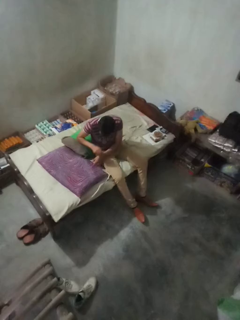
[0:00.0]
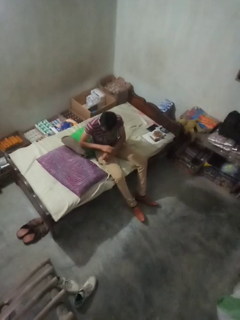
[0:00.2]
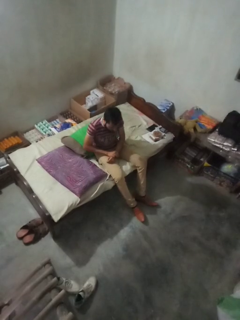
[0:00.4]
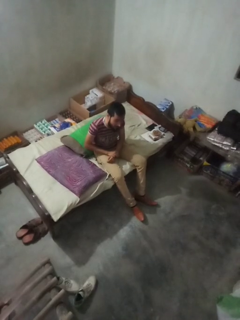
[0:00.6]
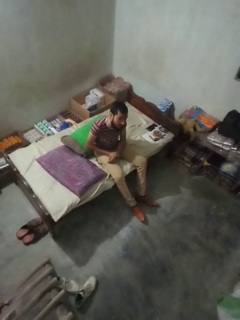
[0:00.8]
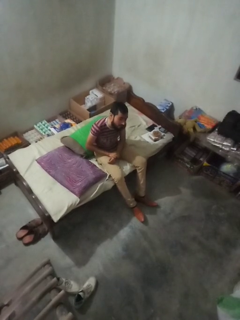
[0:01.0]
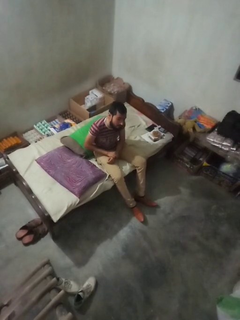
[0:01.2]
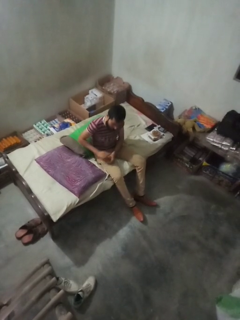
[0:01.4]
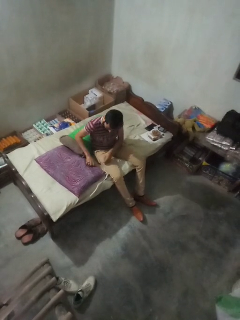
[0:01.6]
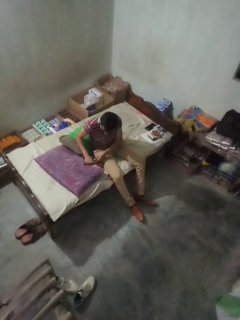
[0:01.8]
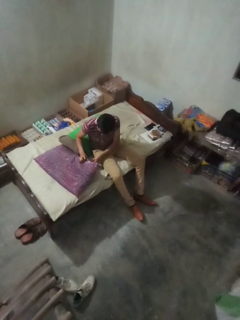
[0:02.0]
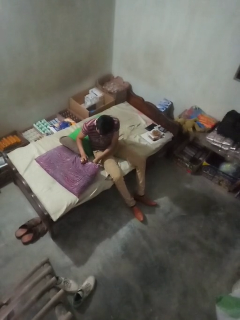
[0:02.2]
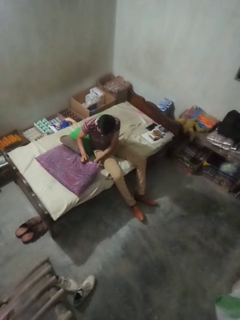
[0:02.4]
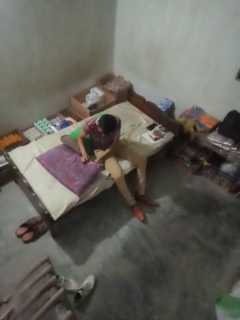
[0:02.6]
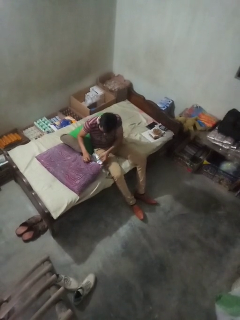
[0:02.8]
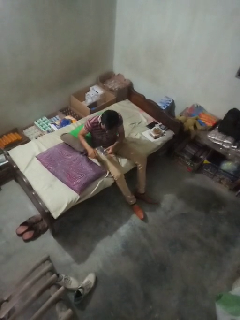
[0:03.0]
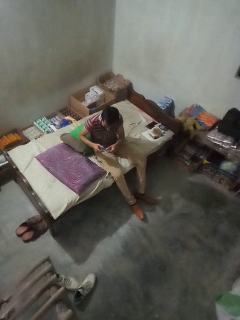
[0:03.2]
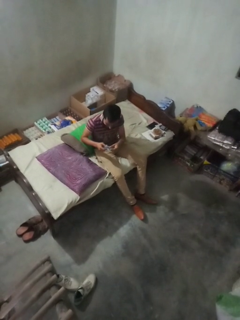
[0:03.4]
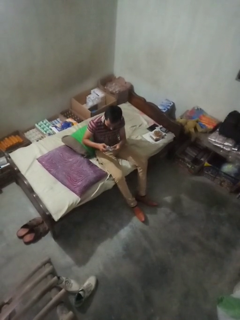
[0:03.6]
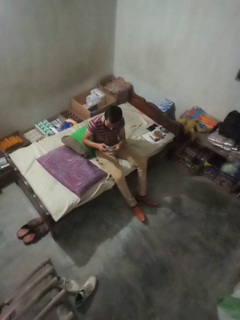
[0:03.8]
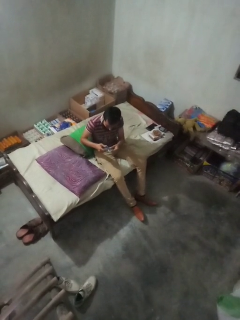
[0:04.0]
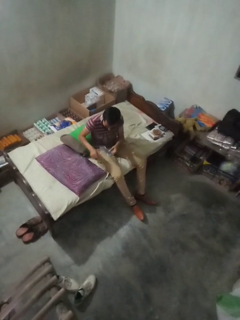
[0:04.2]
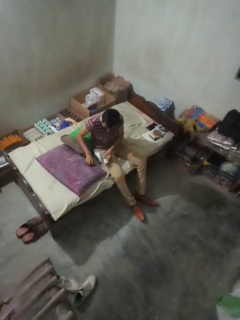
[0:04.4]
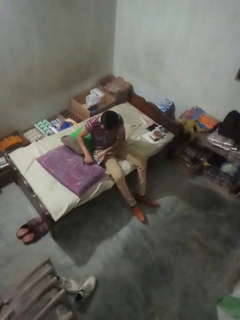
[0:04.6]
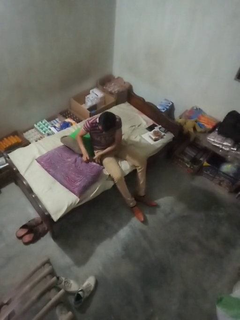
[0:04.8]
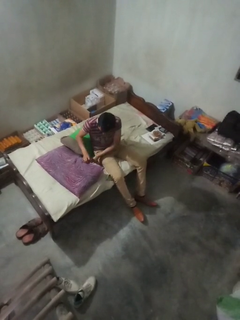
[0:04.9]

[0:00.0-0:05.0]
person searches in couch

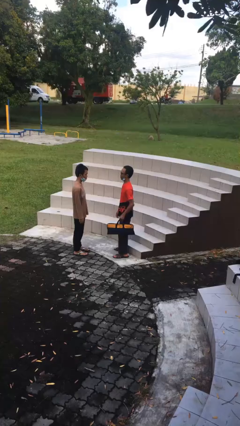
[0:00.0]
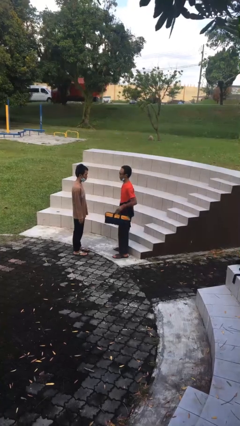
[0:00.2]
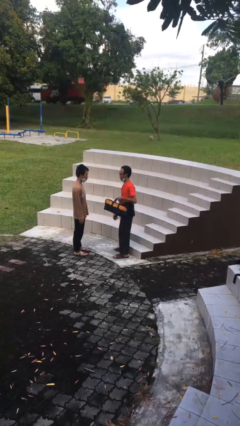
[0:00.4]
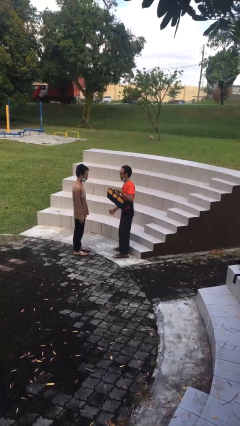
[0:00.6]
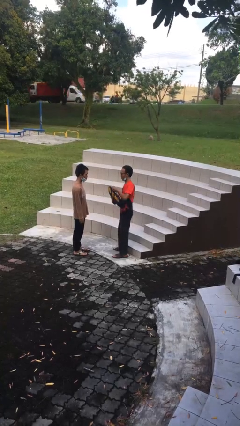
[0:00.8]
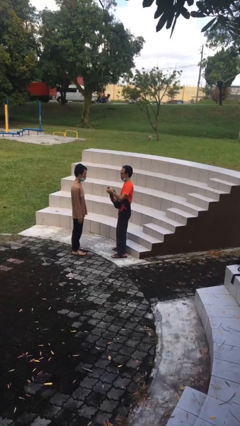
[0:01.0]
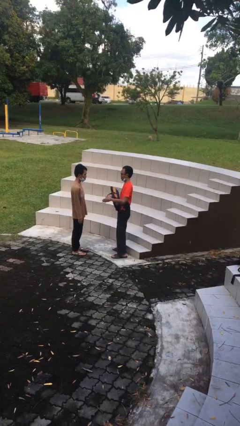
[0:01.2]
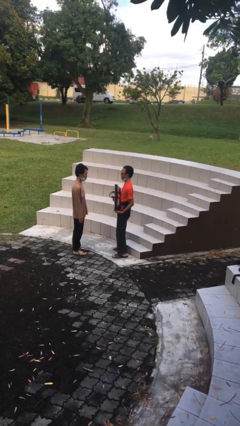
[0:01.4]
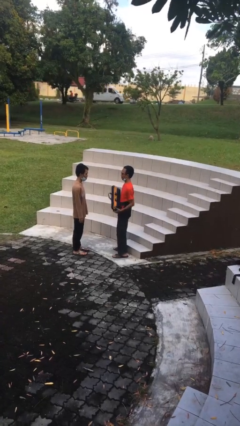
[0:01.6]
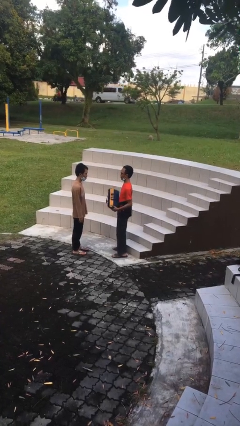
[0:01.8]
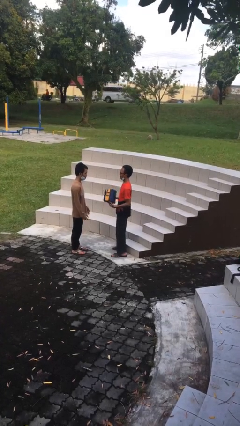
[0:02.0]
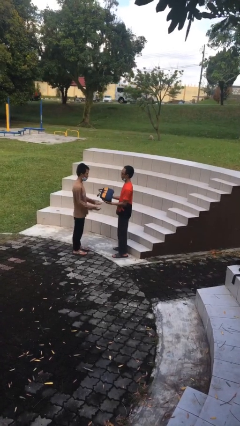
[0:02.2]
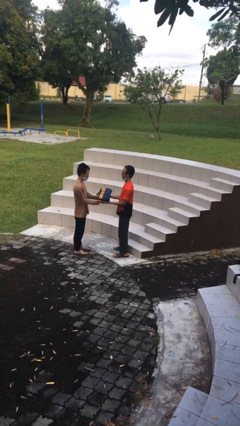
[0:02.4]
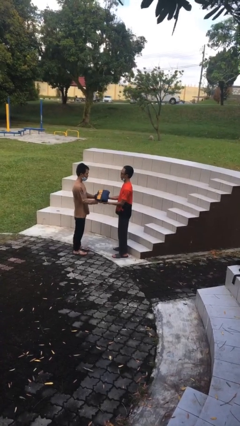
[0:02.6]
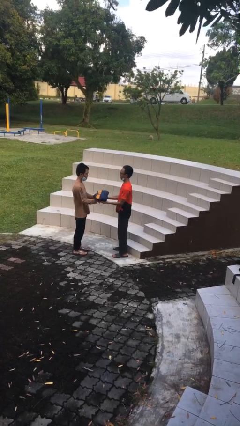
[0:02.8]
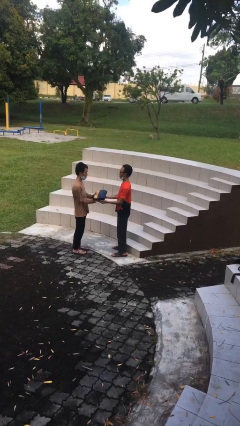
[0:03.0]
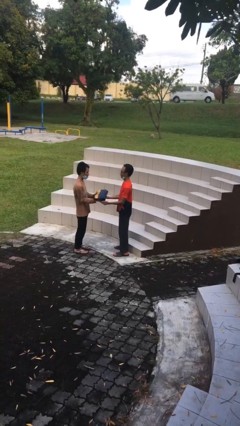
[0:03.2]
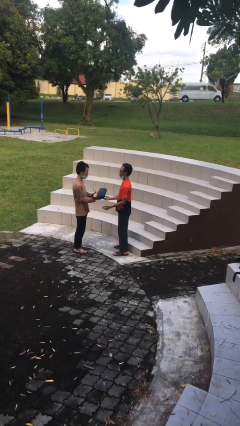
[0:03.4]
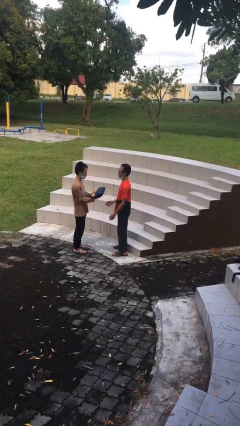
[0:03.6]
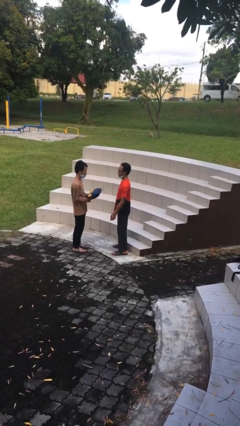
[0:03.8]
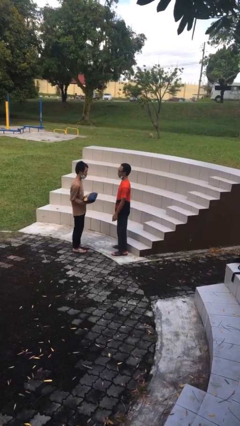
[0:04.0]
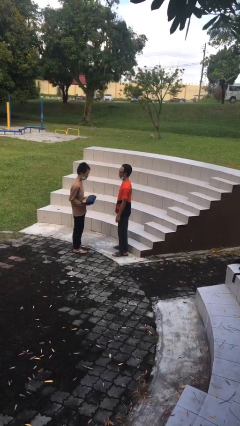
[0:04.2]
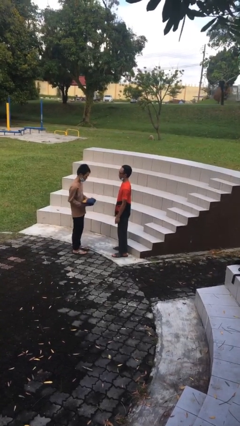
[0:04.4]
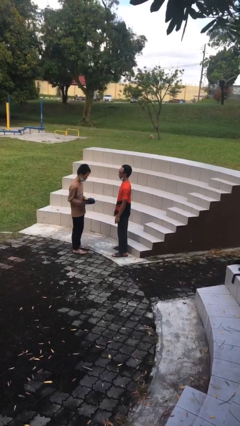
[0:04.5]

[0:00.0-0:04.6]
person transfers object to person

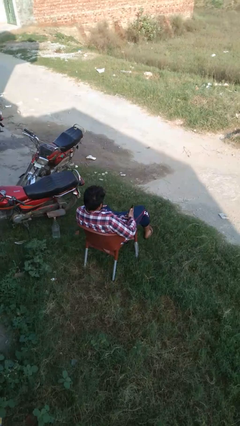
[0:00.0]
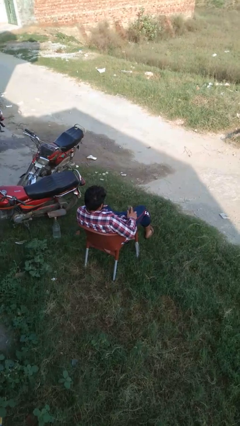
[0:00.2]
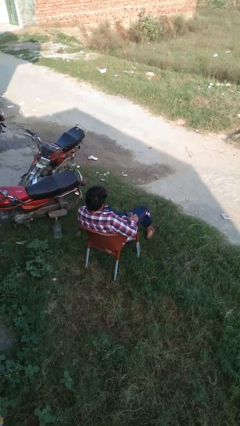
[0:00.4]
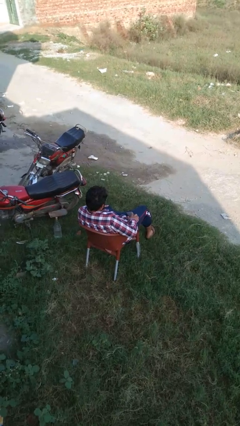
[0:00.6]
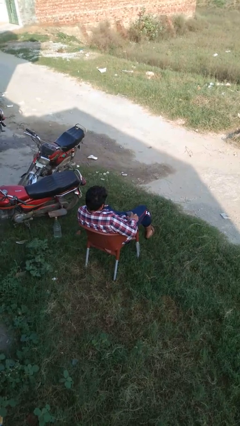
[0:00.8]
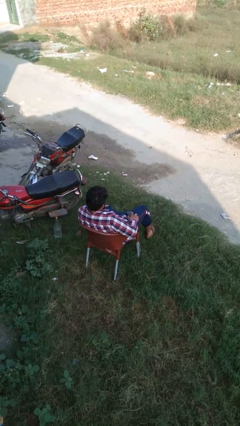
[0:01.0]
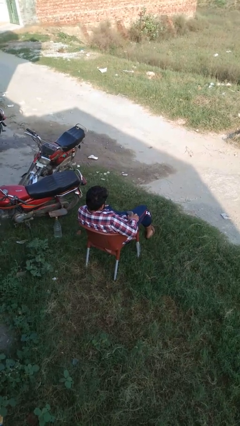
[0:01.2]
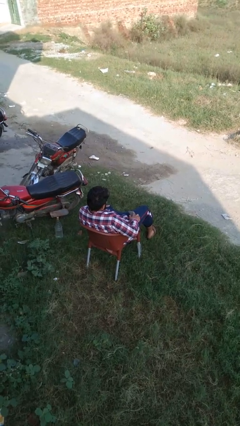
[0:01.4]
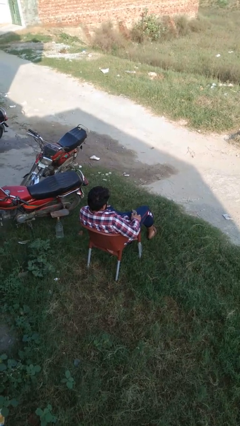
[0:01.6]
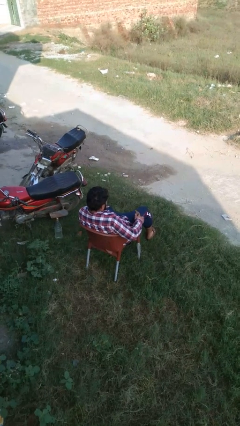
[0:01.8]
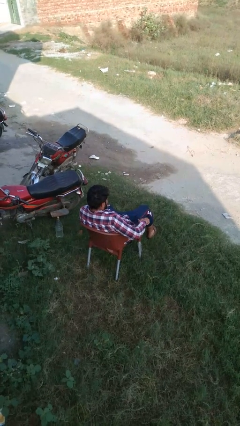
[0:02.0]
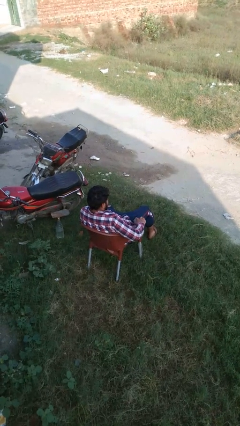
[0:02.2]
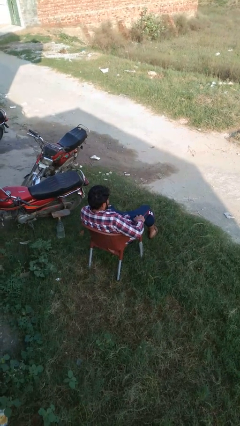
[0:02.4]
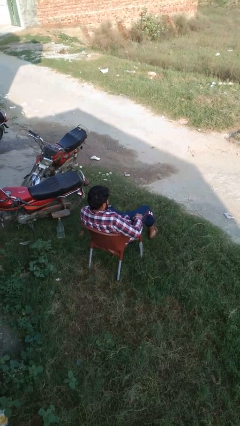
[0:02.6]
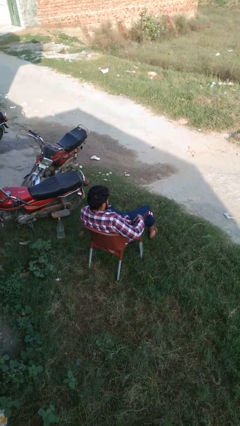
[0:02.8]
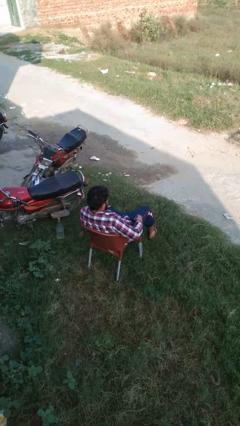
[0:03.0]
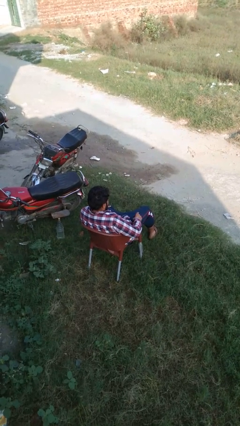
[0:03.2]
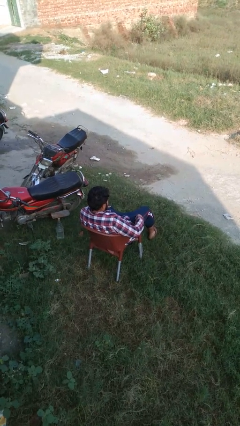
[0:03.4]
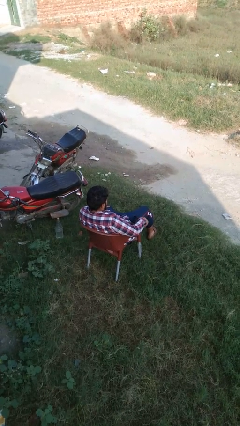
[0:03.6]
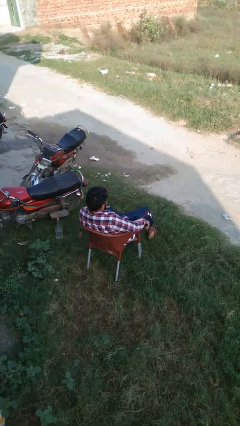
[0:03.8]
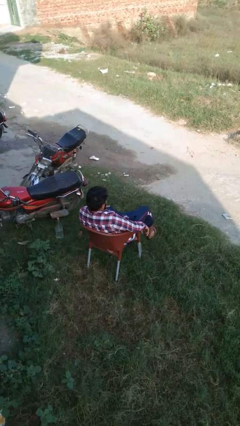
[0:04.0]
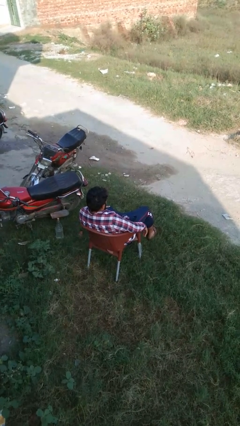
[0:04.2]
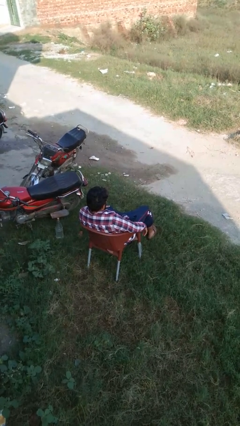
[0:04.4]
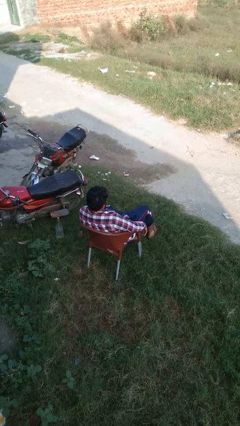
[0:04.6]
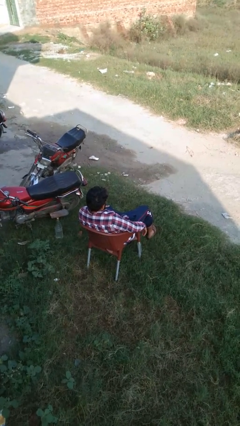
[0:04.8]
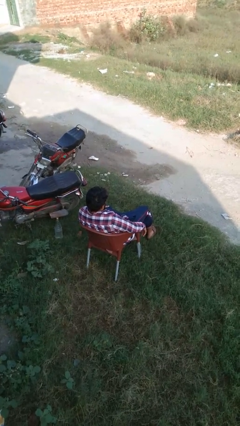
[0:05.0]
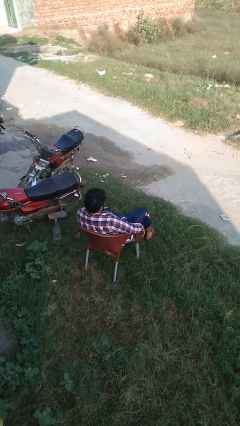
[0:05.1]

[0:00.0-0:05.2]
person puts phone into pocket

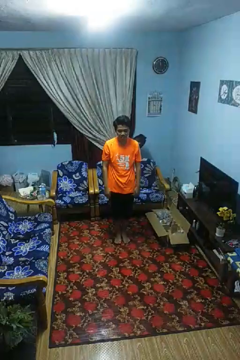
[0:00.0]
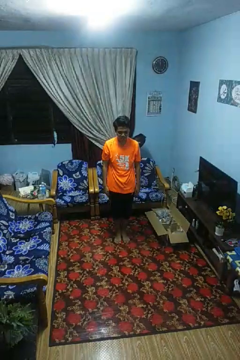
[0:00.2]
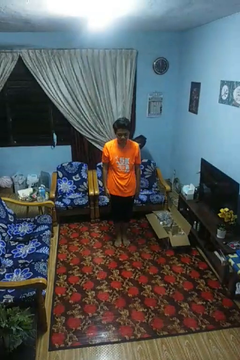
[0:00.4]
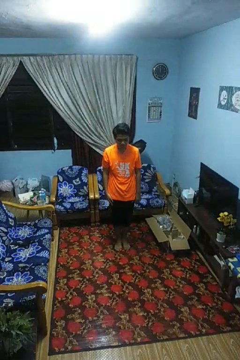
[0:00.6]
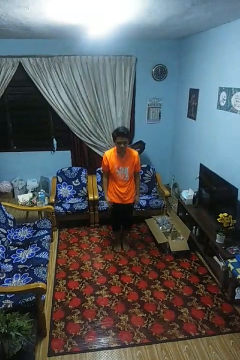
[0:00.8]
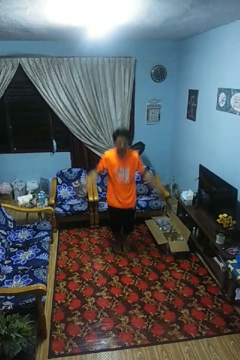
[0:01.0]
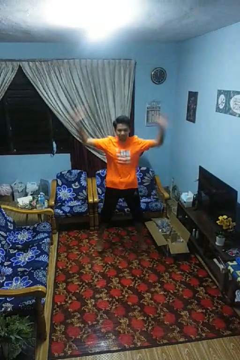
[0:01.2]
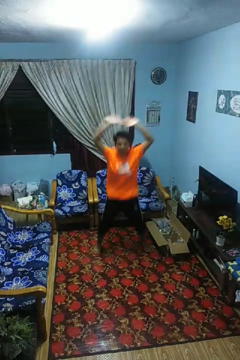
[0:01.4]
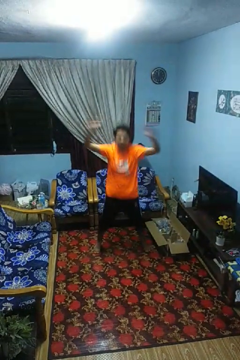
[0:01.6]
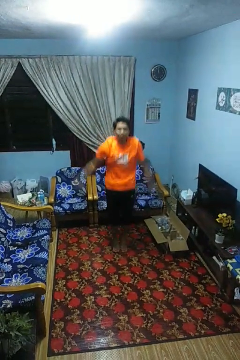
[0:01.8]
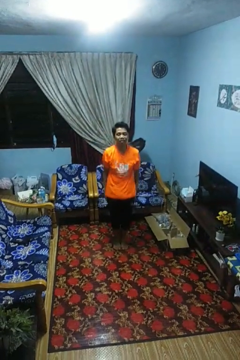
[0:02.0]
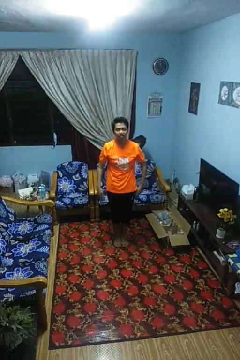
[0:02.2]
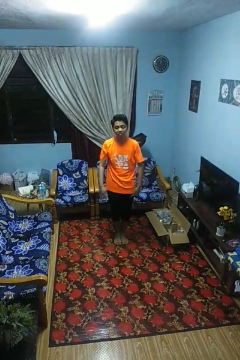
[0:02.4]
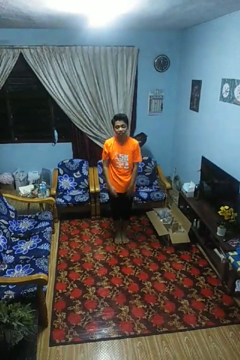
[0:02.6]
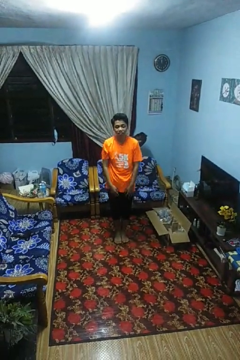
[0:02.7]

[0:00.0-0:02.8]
person exercises with jumping jacks

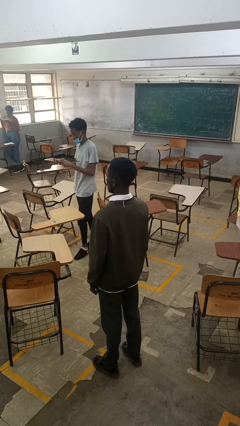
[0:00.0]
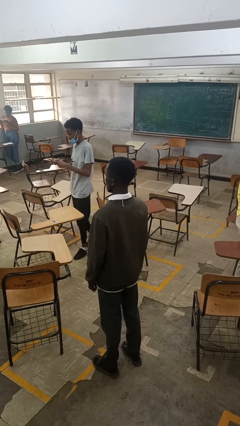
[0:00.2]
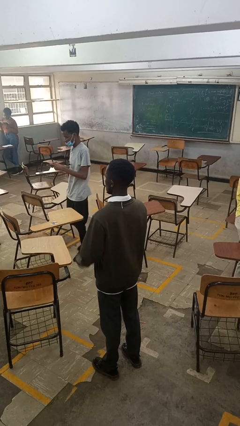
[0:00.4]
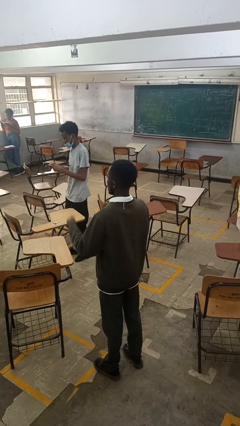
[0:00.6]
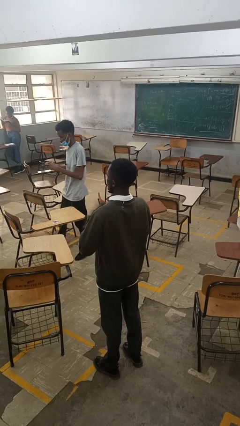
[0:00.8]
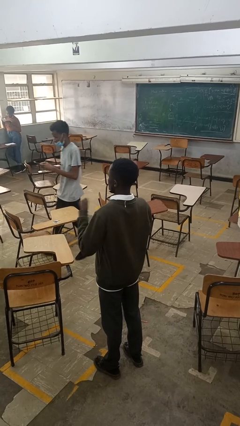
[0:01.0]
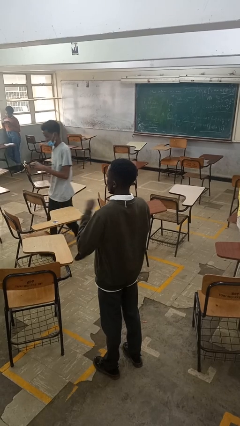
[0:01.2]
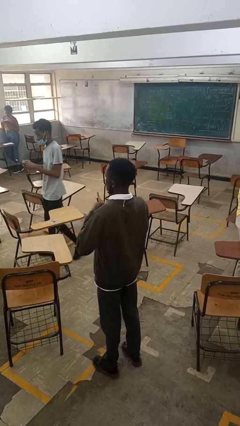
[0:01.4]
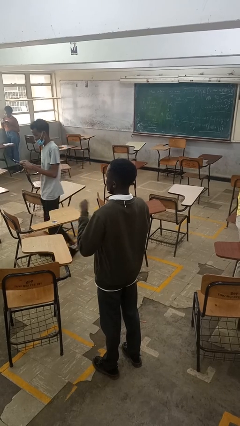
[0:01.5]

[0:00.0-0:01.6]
person drums on chest
